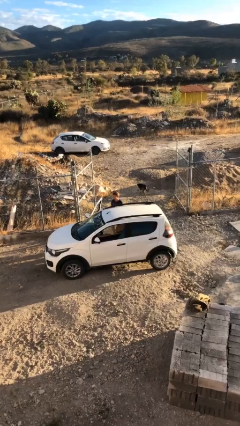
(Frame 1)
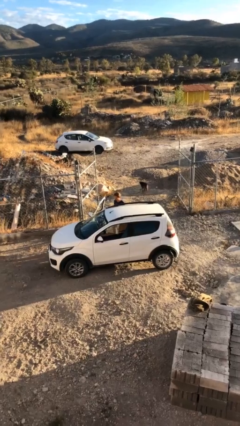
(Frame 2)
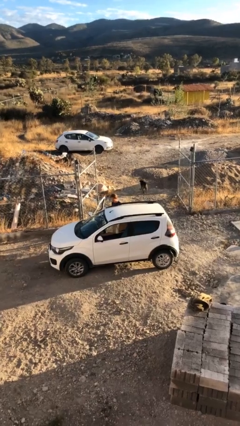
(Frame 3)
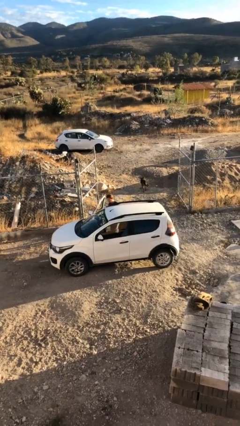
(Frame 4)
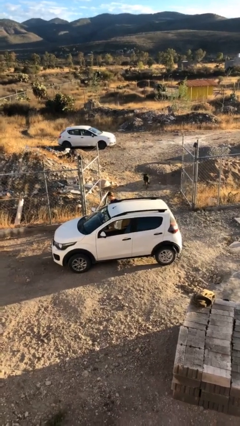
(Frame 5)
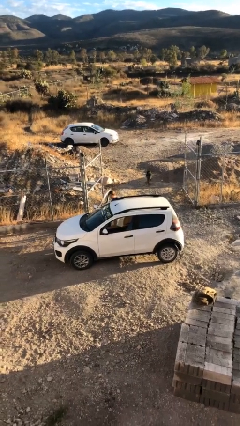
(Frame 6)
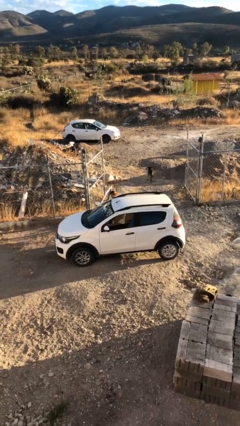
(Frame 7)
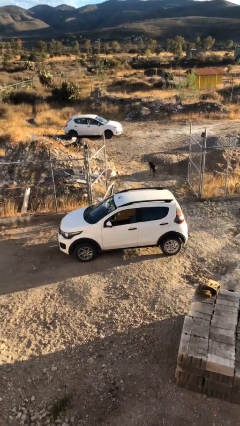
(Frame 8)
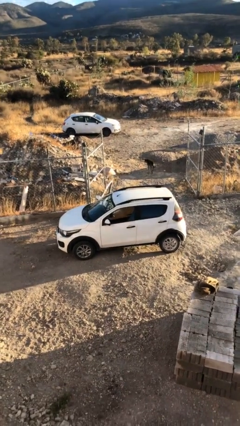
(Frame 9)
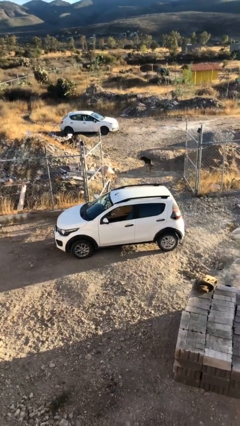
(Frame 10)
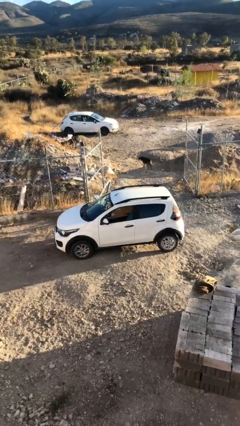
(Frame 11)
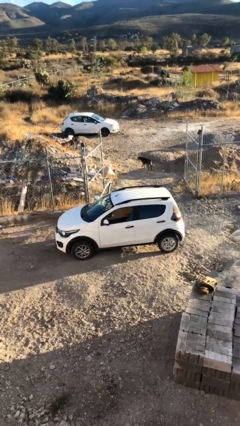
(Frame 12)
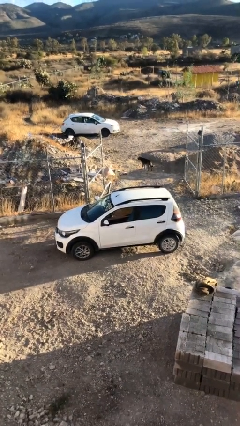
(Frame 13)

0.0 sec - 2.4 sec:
person enters car

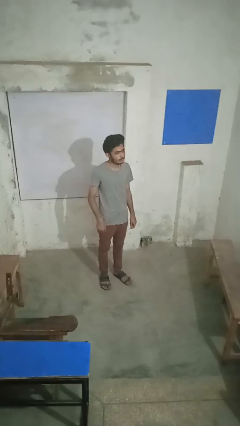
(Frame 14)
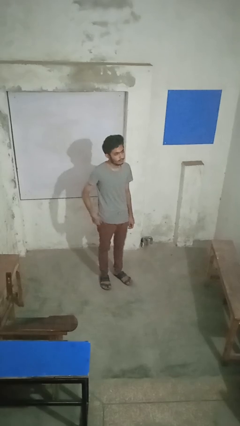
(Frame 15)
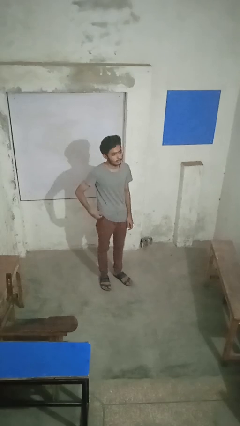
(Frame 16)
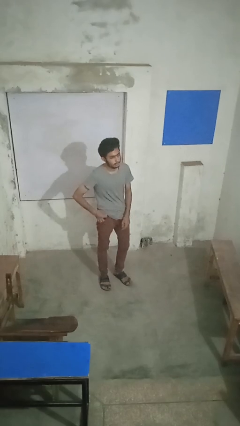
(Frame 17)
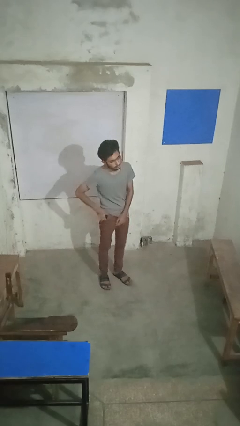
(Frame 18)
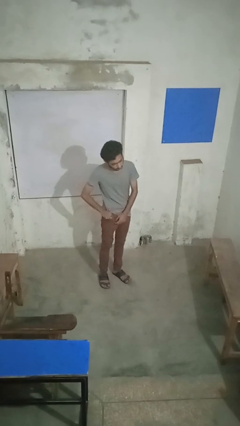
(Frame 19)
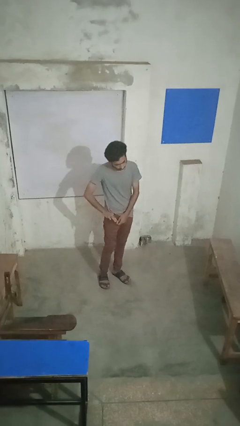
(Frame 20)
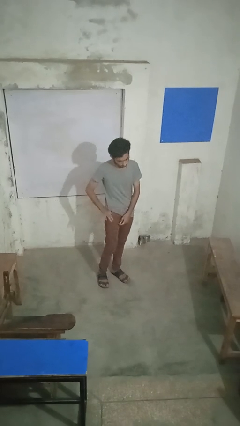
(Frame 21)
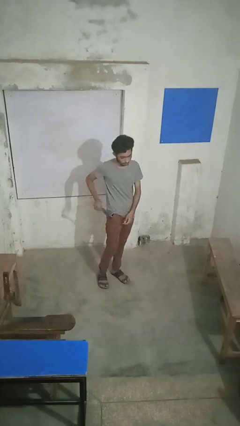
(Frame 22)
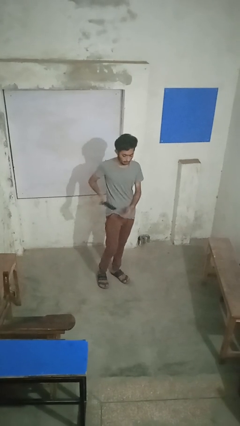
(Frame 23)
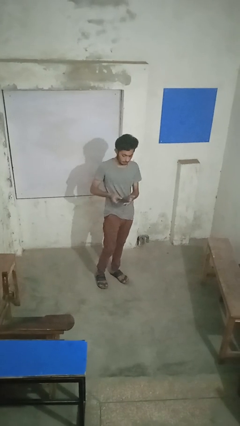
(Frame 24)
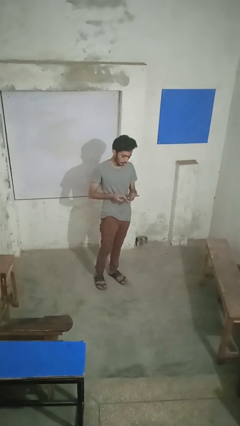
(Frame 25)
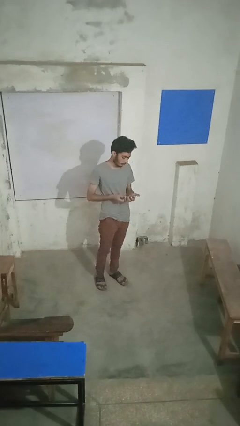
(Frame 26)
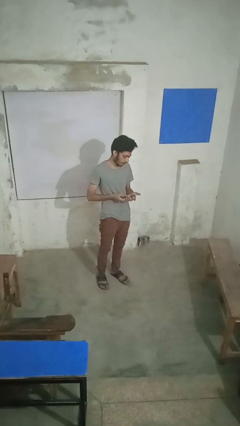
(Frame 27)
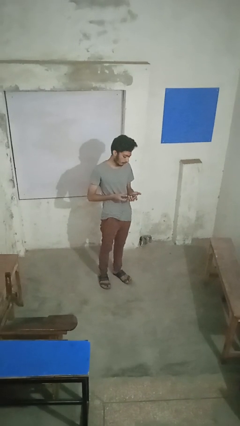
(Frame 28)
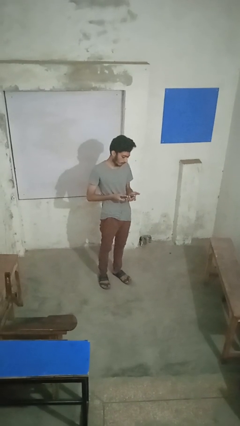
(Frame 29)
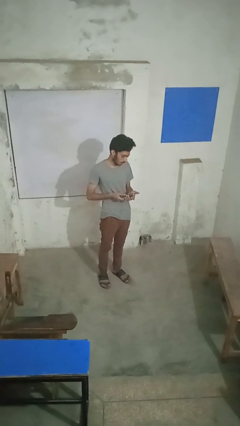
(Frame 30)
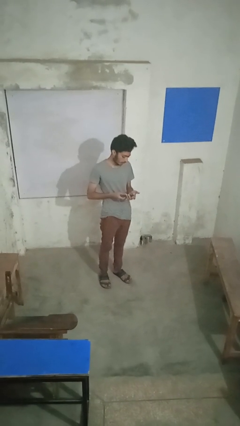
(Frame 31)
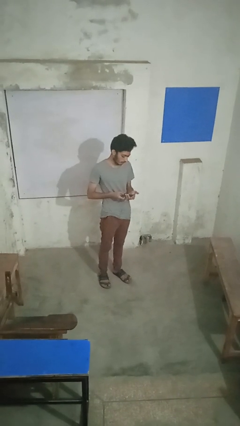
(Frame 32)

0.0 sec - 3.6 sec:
person takes phone from pocket

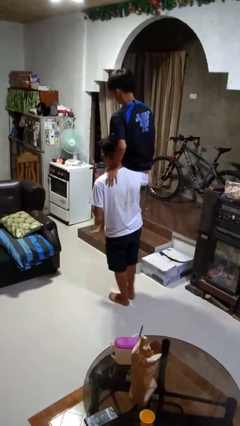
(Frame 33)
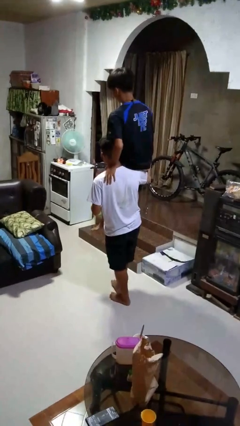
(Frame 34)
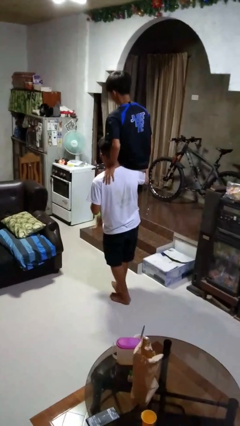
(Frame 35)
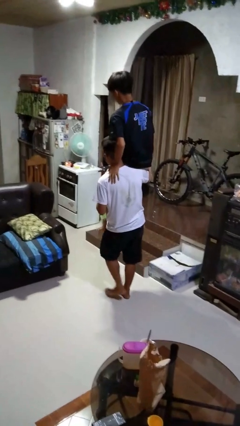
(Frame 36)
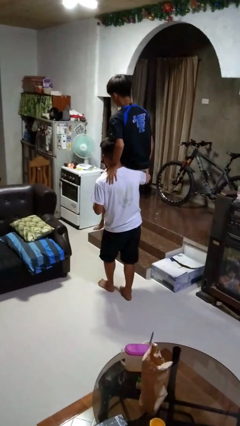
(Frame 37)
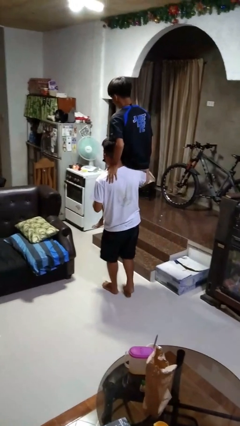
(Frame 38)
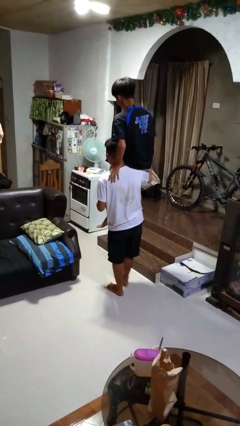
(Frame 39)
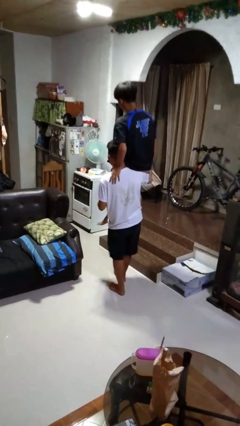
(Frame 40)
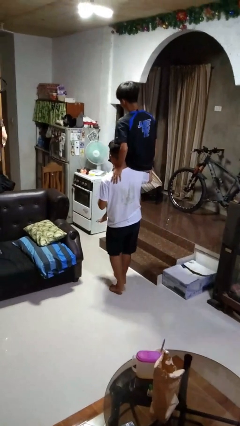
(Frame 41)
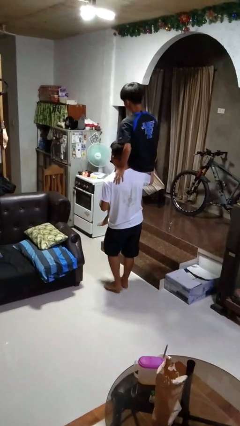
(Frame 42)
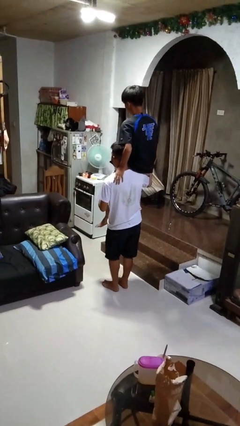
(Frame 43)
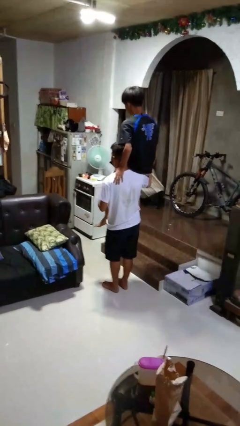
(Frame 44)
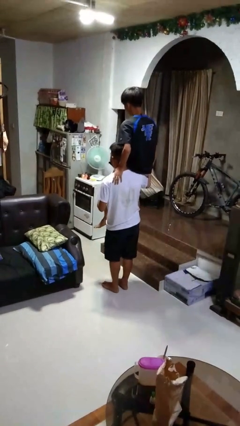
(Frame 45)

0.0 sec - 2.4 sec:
person carries person on shoulders

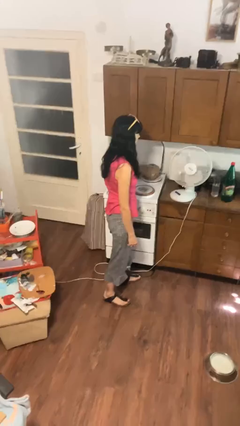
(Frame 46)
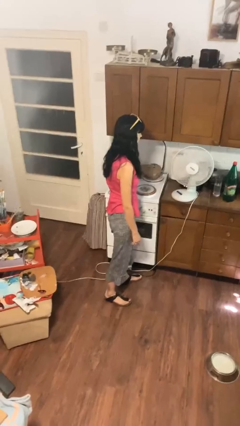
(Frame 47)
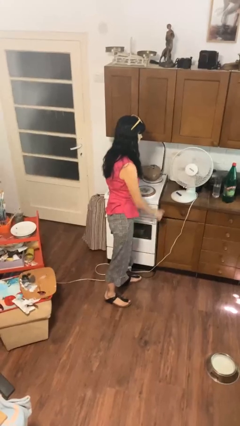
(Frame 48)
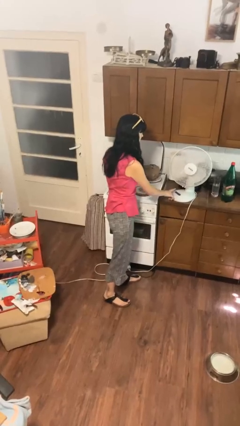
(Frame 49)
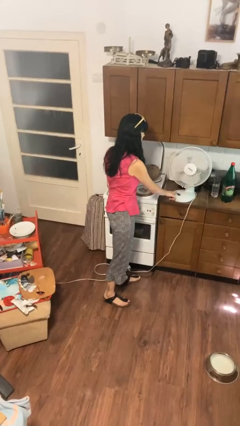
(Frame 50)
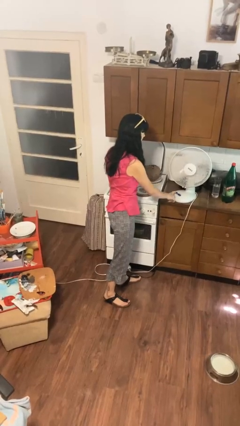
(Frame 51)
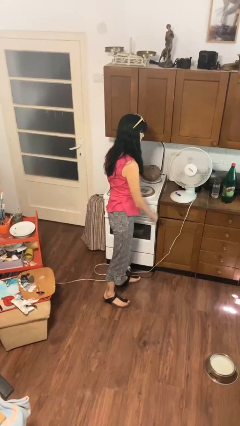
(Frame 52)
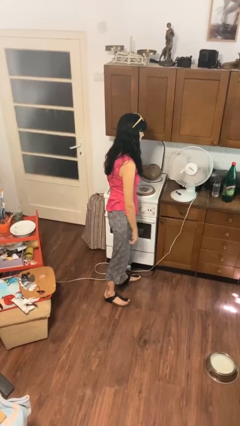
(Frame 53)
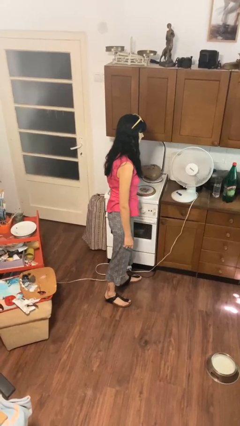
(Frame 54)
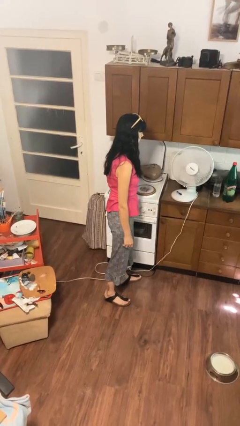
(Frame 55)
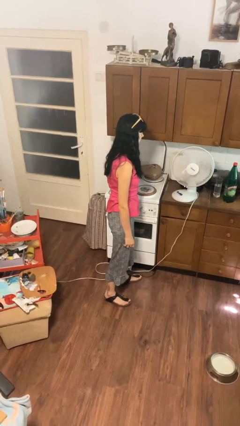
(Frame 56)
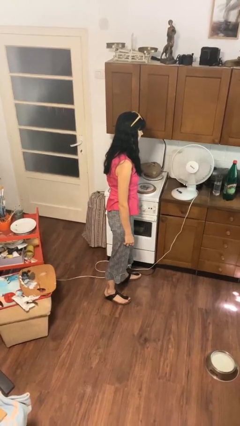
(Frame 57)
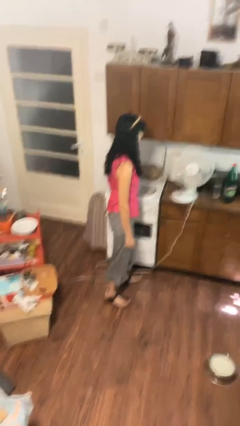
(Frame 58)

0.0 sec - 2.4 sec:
person turns on fan

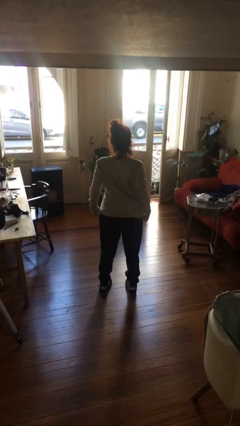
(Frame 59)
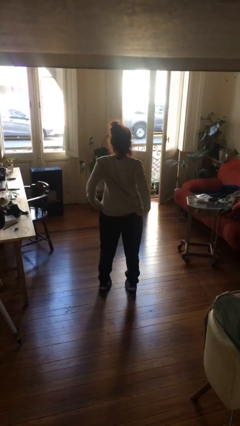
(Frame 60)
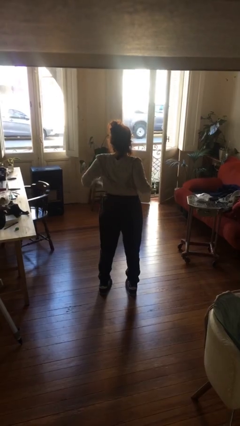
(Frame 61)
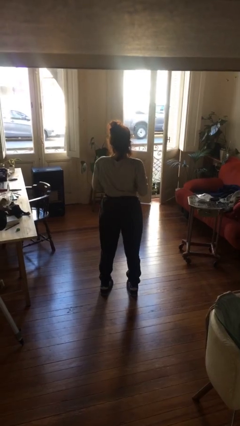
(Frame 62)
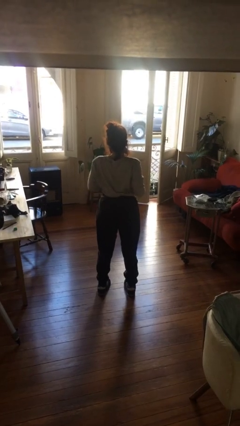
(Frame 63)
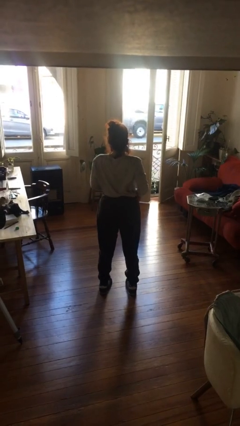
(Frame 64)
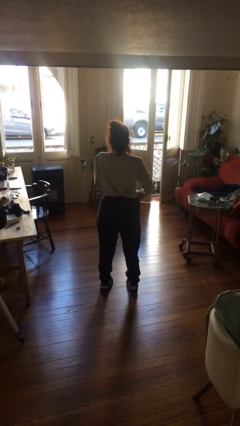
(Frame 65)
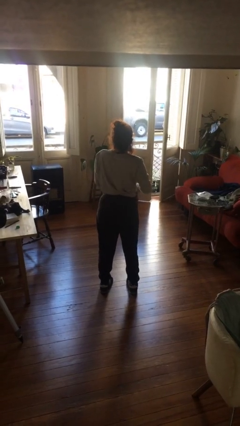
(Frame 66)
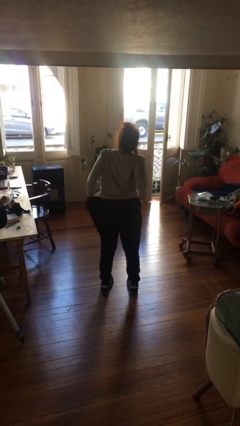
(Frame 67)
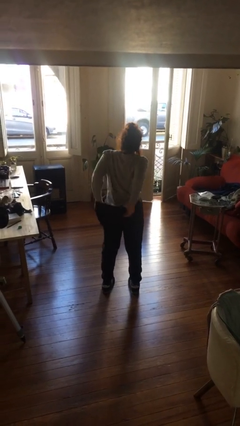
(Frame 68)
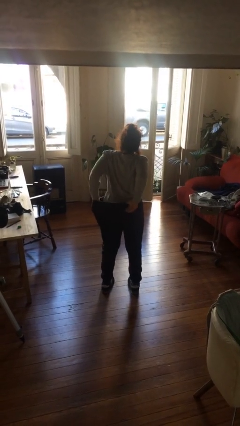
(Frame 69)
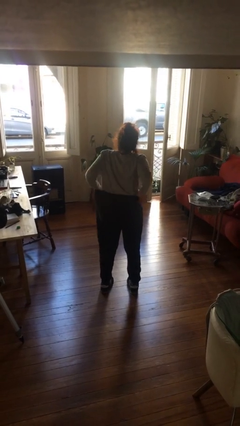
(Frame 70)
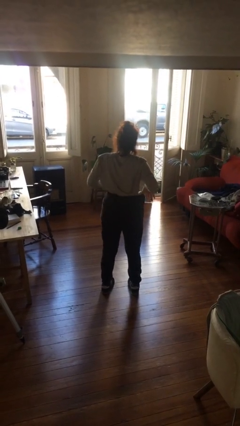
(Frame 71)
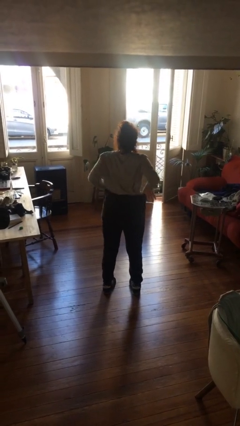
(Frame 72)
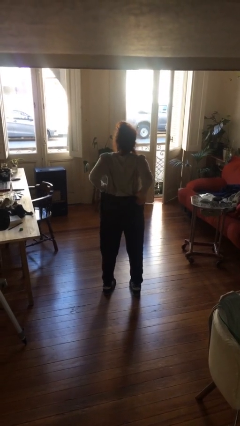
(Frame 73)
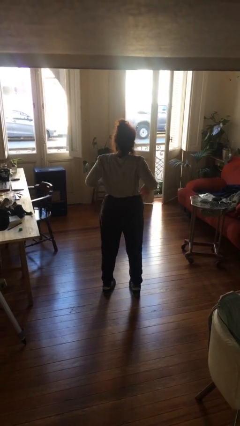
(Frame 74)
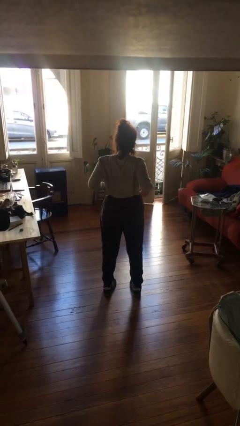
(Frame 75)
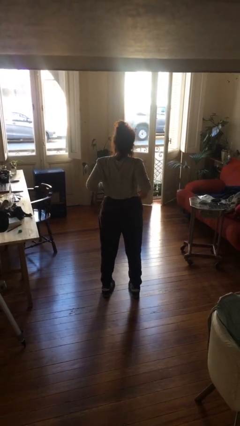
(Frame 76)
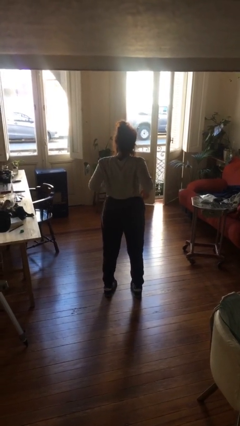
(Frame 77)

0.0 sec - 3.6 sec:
person tucks in shirt

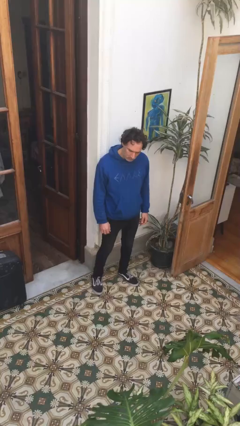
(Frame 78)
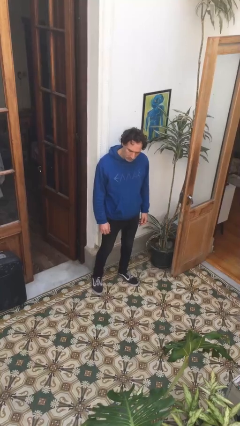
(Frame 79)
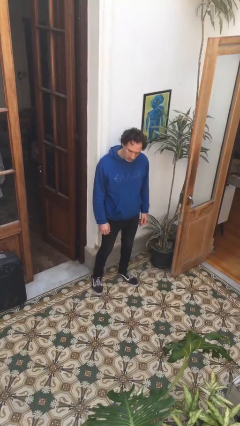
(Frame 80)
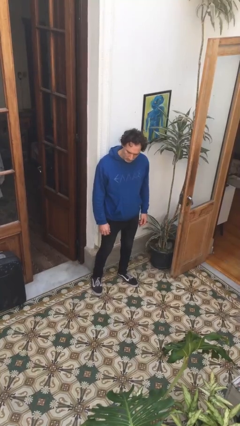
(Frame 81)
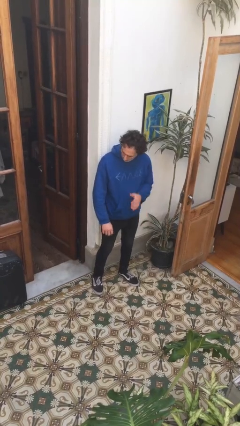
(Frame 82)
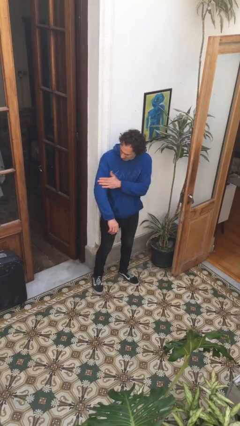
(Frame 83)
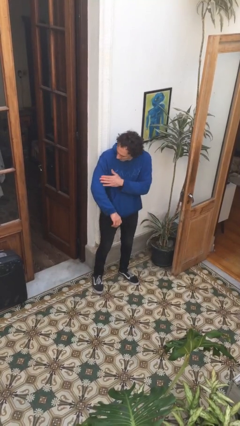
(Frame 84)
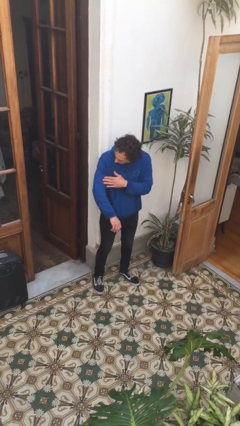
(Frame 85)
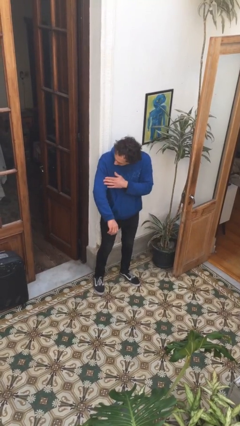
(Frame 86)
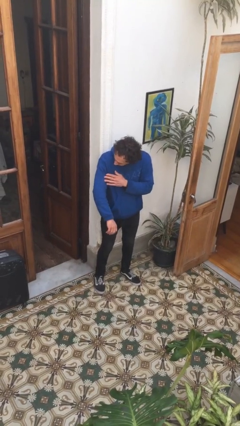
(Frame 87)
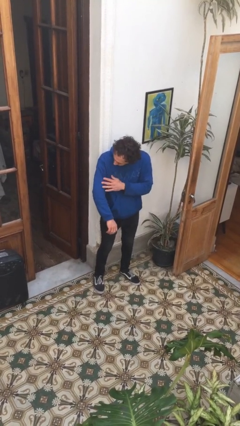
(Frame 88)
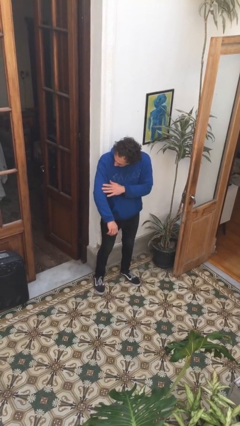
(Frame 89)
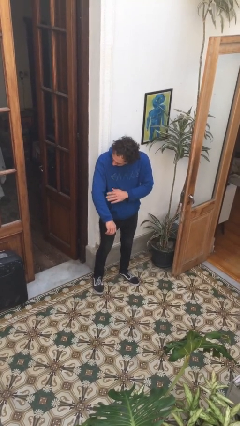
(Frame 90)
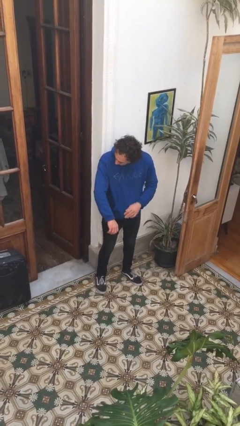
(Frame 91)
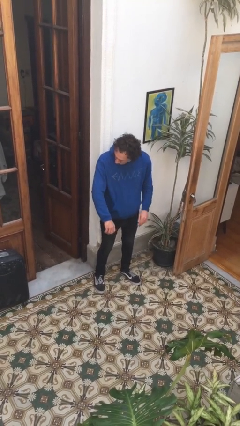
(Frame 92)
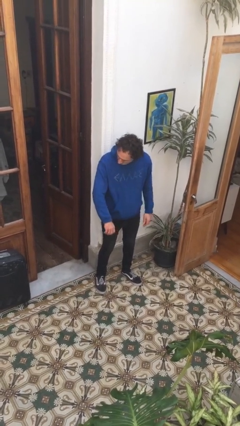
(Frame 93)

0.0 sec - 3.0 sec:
person swats bug
